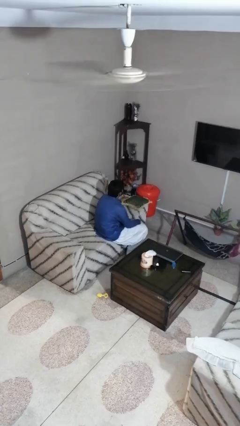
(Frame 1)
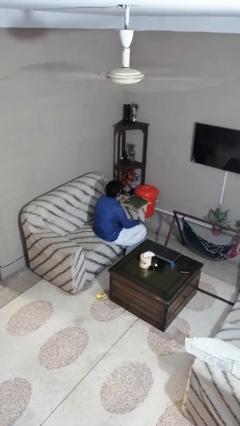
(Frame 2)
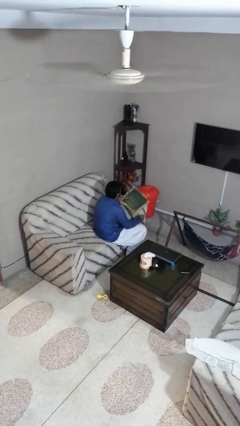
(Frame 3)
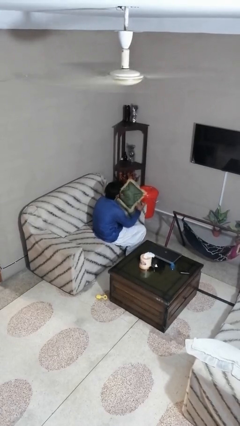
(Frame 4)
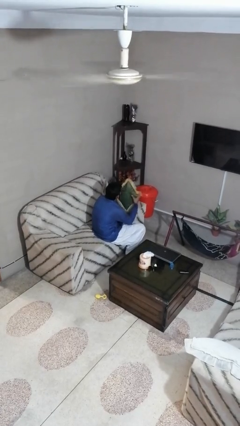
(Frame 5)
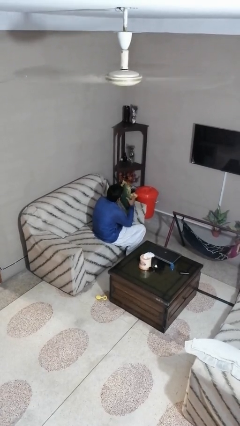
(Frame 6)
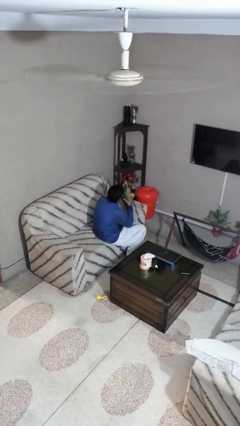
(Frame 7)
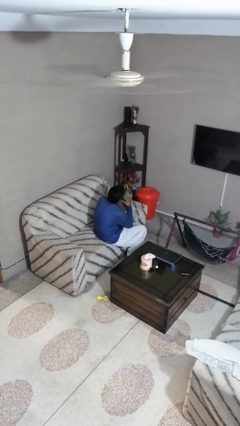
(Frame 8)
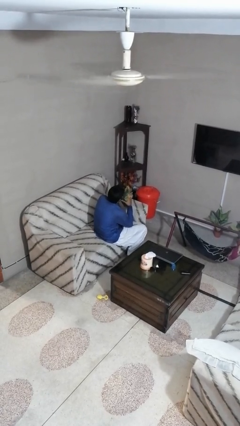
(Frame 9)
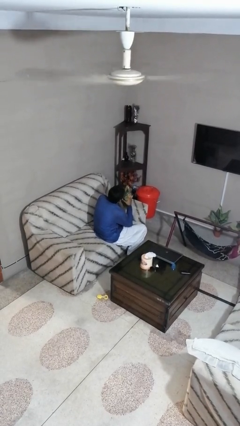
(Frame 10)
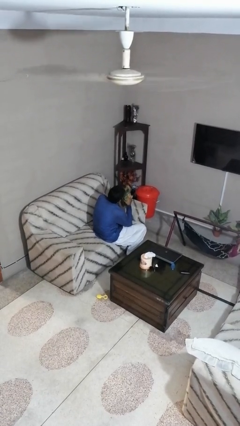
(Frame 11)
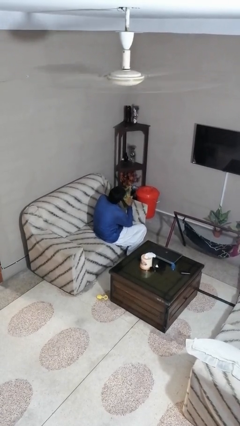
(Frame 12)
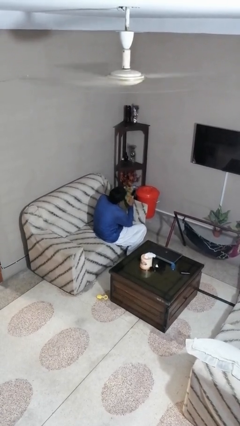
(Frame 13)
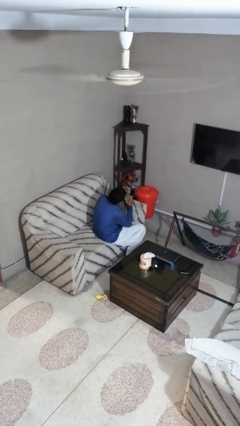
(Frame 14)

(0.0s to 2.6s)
person squeezes object

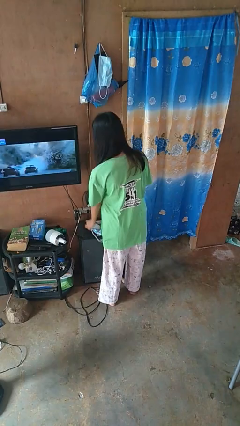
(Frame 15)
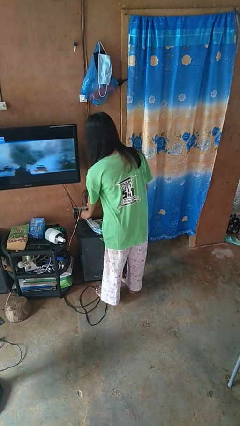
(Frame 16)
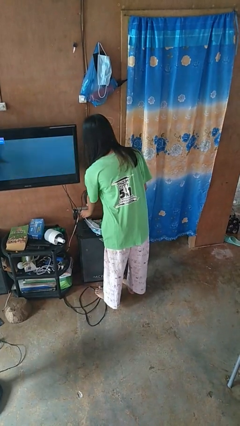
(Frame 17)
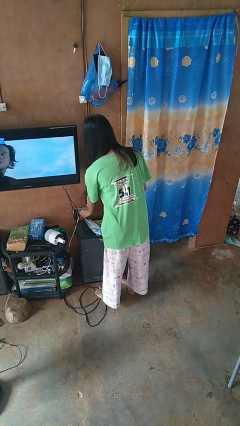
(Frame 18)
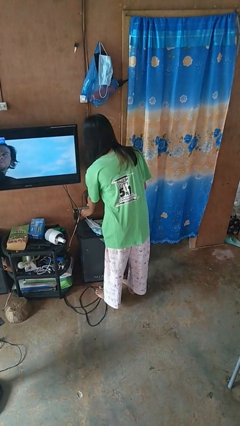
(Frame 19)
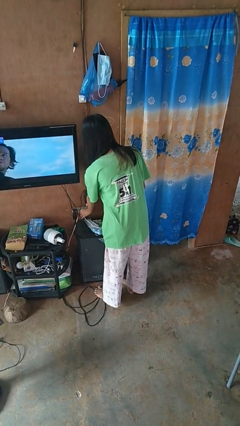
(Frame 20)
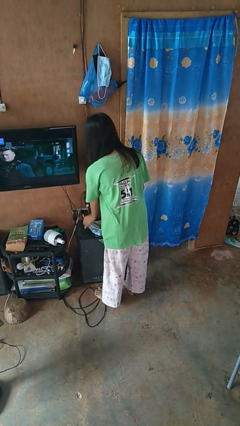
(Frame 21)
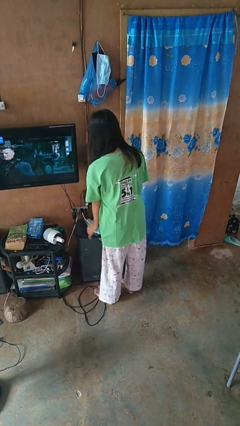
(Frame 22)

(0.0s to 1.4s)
person plugs into electrical socket

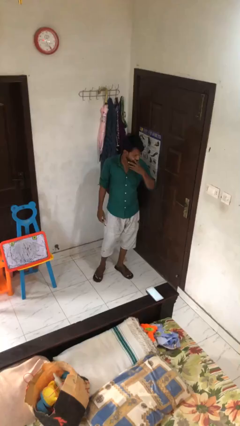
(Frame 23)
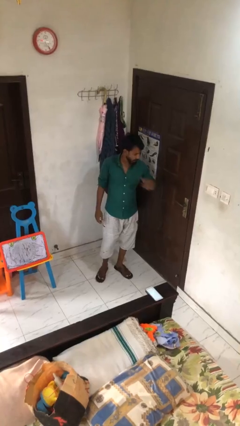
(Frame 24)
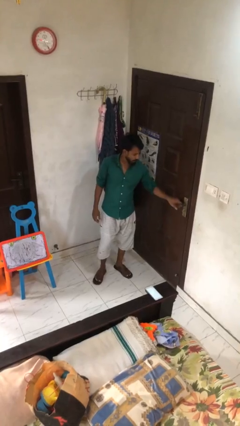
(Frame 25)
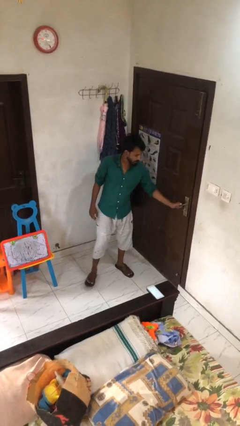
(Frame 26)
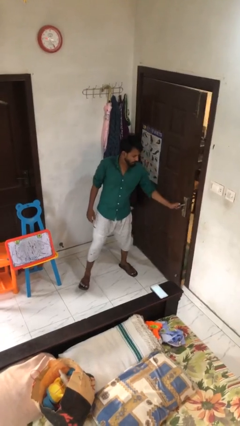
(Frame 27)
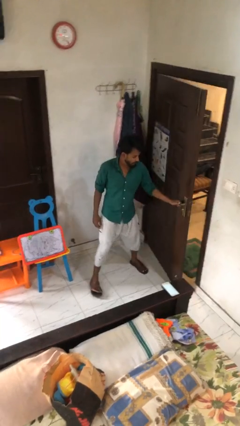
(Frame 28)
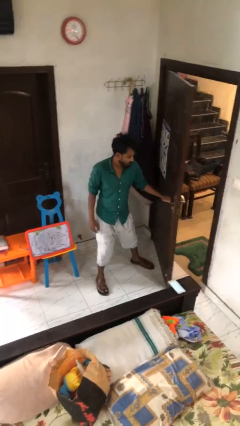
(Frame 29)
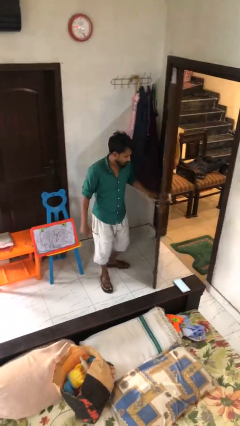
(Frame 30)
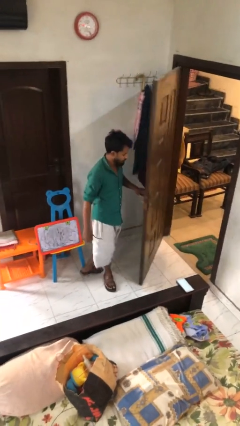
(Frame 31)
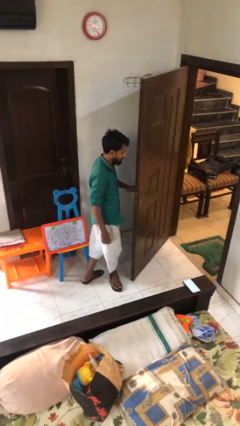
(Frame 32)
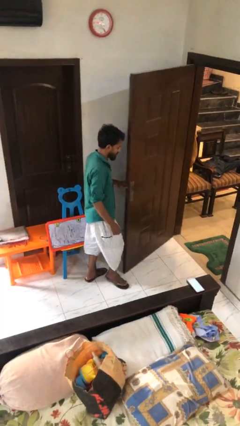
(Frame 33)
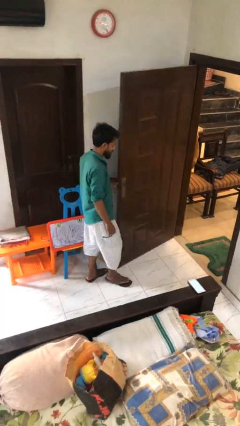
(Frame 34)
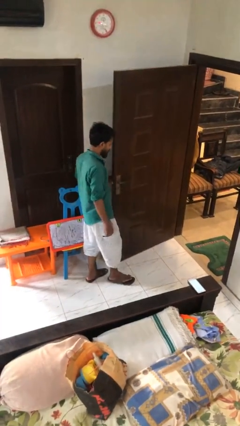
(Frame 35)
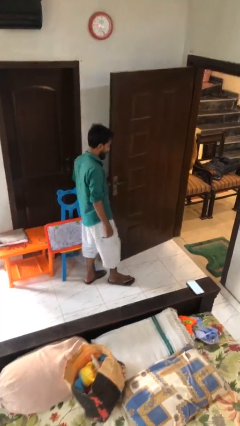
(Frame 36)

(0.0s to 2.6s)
person opens facility door

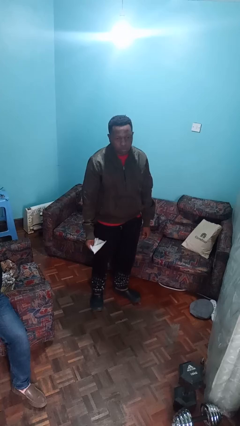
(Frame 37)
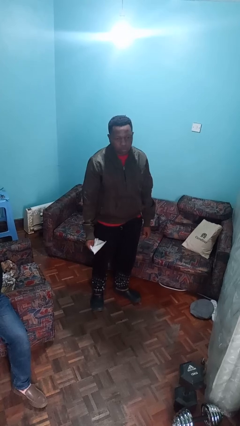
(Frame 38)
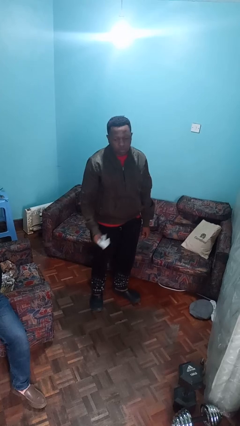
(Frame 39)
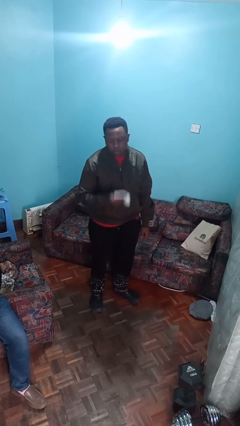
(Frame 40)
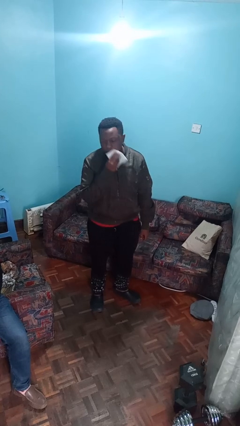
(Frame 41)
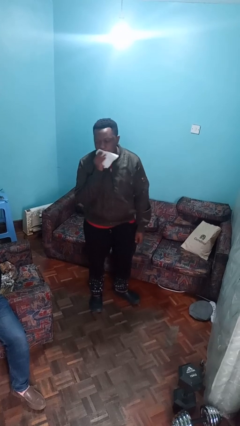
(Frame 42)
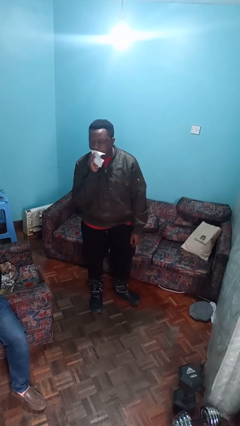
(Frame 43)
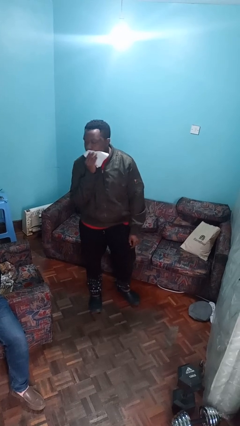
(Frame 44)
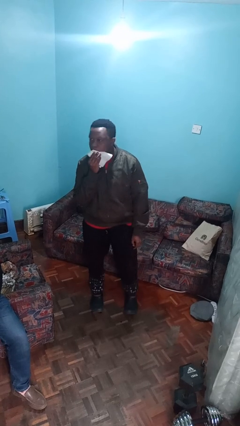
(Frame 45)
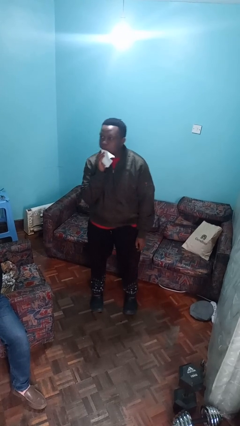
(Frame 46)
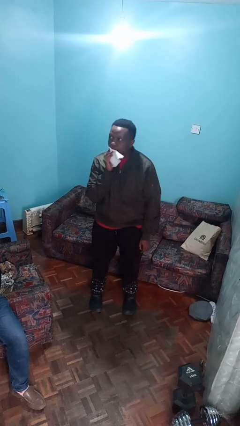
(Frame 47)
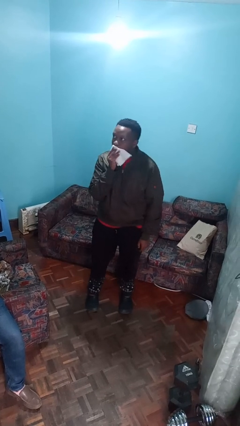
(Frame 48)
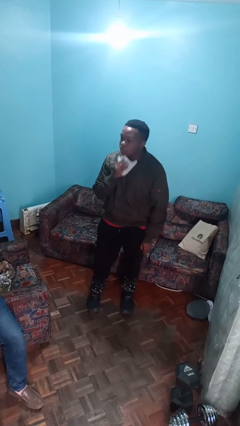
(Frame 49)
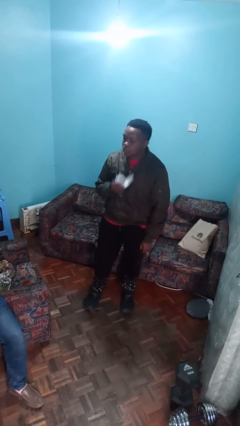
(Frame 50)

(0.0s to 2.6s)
person wipes mouth with napkin

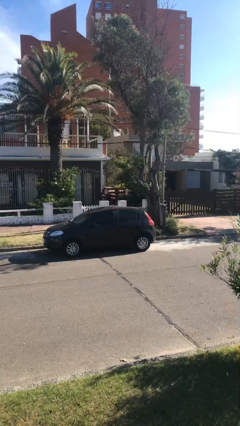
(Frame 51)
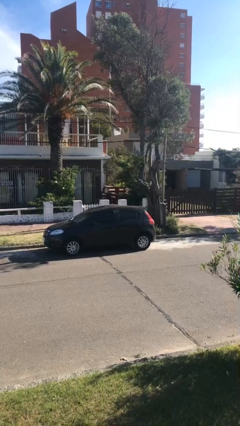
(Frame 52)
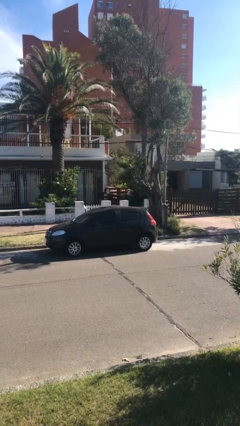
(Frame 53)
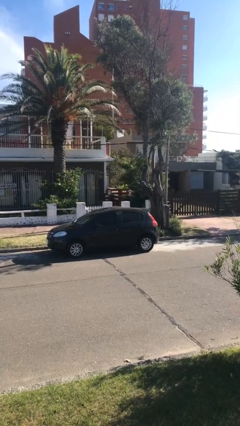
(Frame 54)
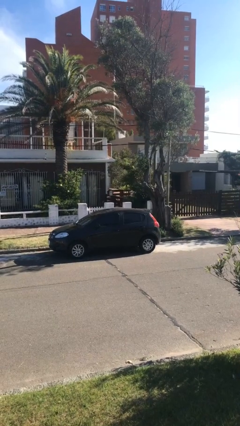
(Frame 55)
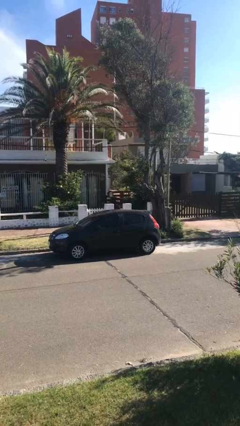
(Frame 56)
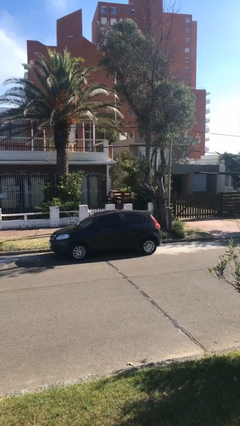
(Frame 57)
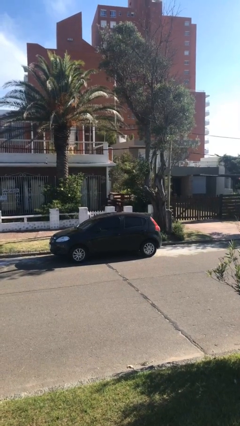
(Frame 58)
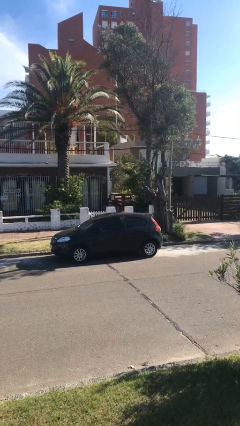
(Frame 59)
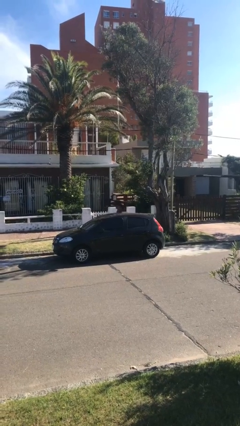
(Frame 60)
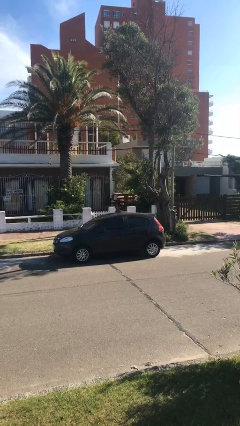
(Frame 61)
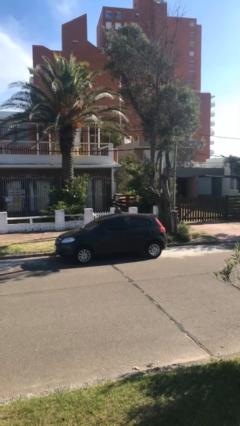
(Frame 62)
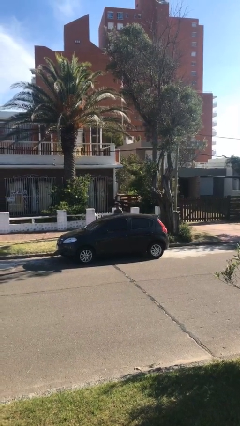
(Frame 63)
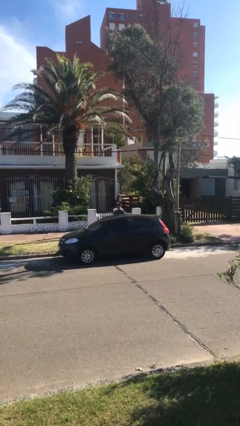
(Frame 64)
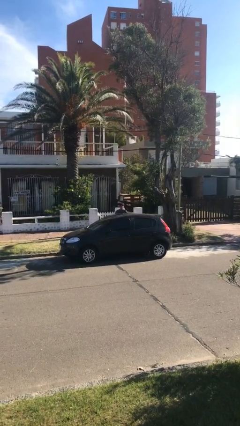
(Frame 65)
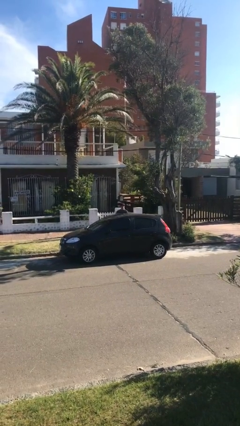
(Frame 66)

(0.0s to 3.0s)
person exits car

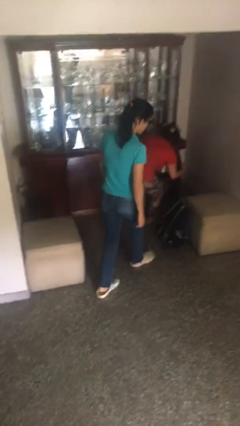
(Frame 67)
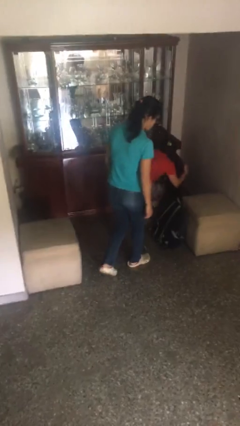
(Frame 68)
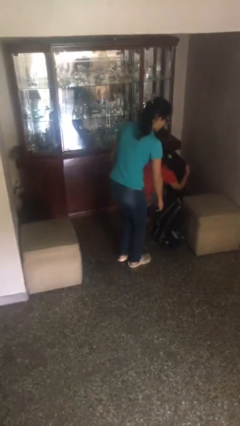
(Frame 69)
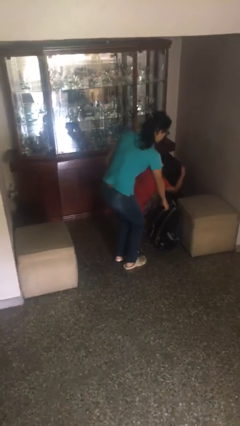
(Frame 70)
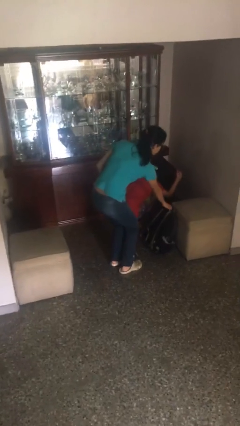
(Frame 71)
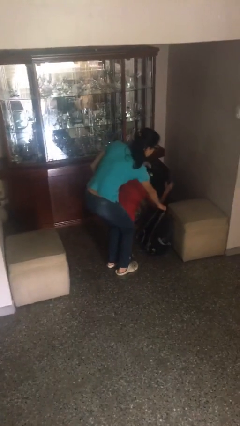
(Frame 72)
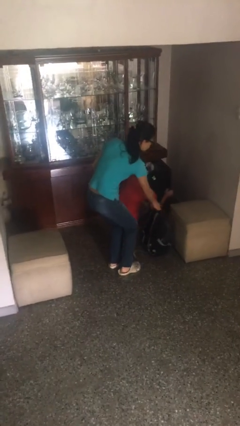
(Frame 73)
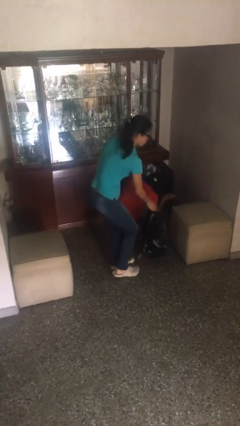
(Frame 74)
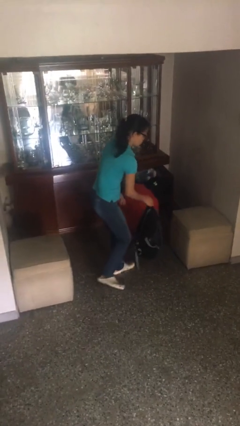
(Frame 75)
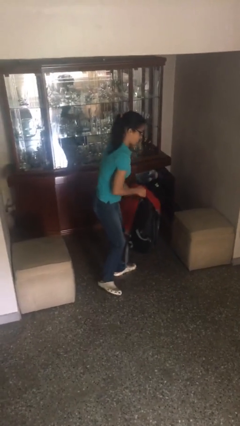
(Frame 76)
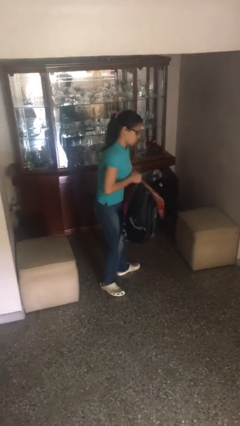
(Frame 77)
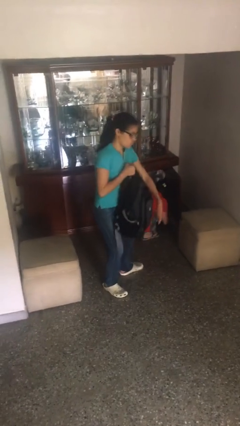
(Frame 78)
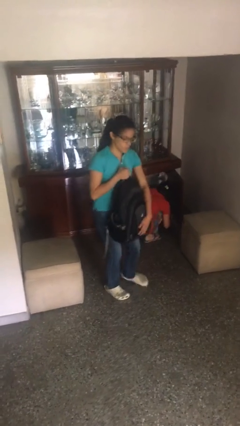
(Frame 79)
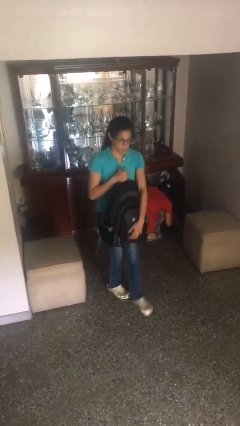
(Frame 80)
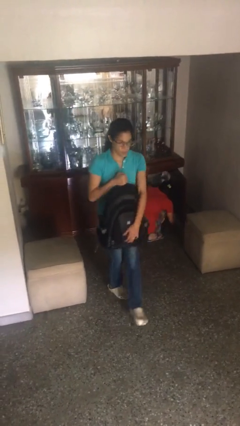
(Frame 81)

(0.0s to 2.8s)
person steals object from person

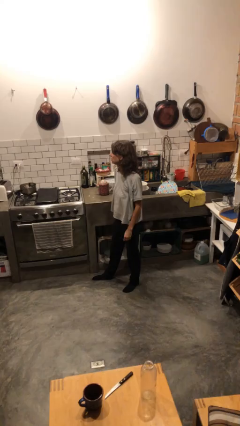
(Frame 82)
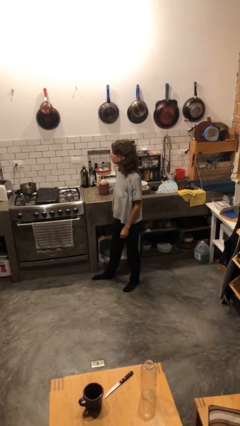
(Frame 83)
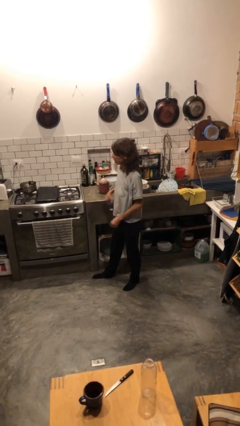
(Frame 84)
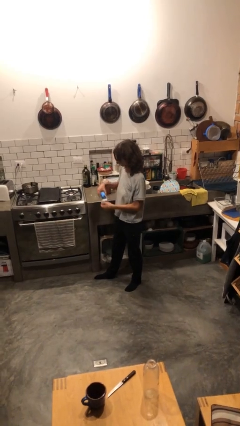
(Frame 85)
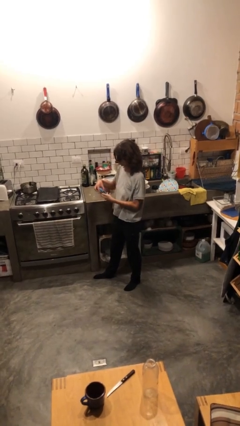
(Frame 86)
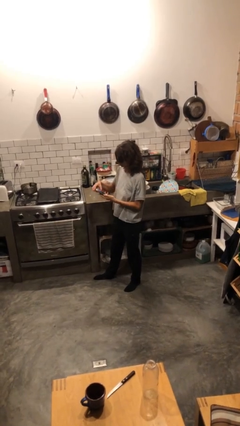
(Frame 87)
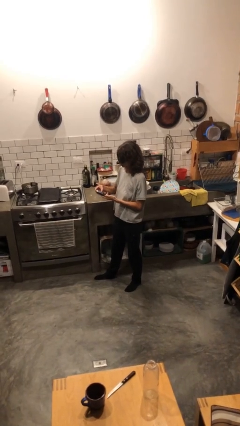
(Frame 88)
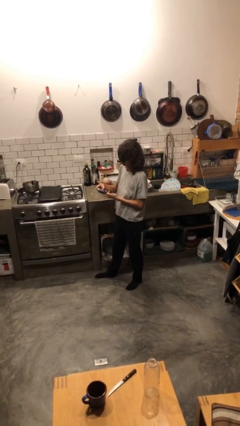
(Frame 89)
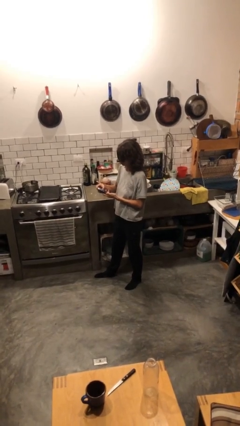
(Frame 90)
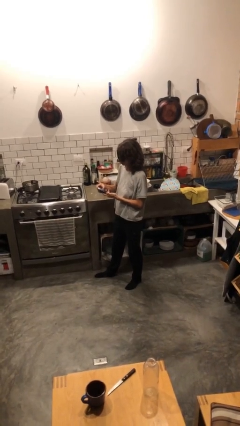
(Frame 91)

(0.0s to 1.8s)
person takes phone from pocket

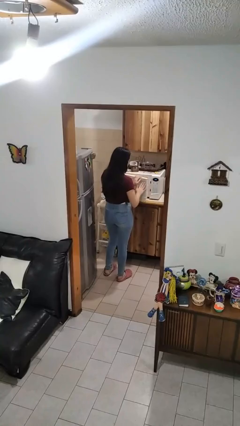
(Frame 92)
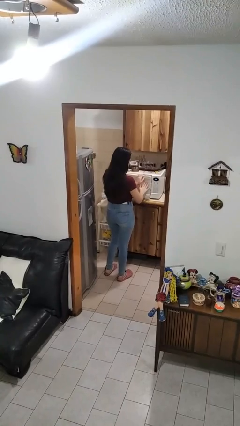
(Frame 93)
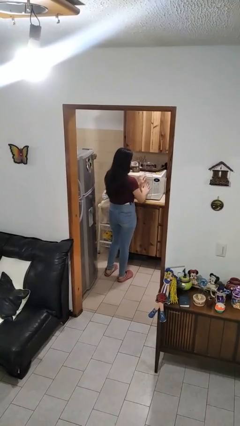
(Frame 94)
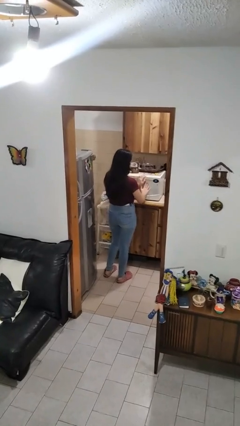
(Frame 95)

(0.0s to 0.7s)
person closes microwave
